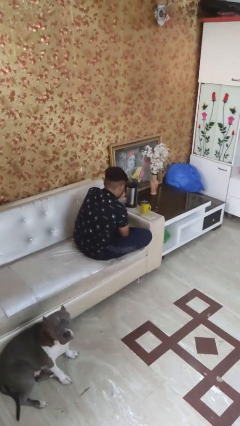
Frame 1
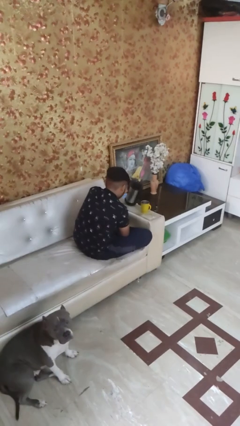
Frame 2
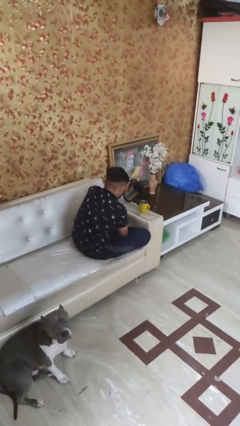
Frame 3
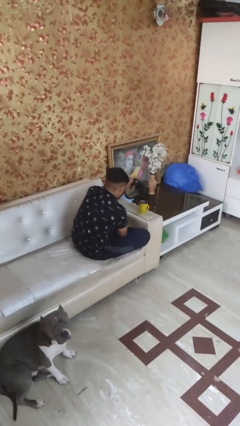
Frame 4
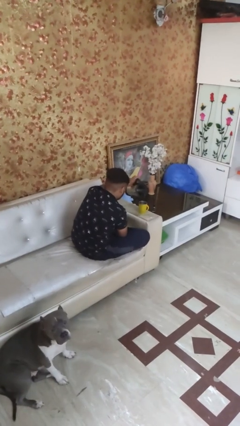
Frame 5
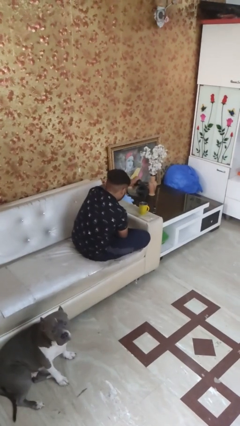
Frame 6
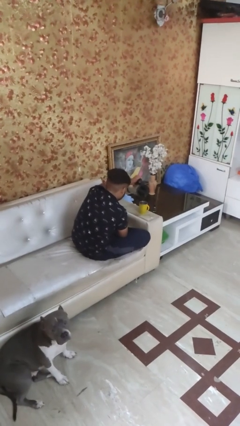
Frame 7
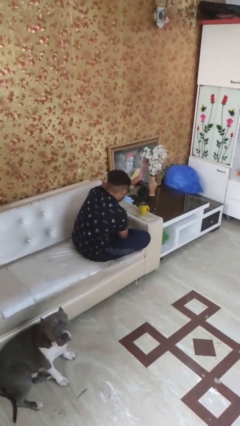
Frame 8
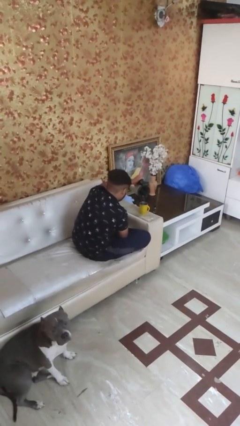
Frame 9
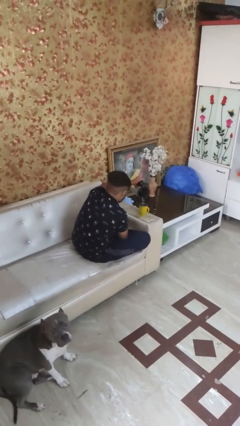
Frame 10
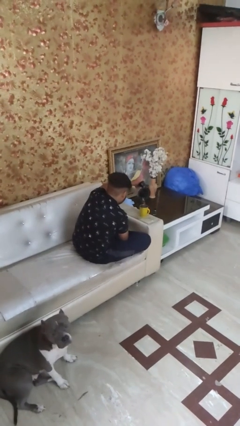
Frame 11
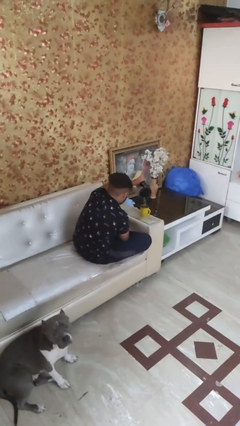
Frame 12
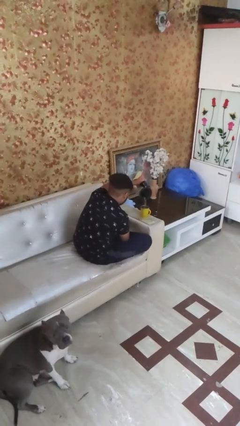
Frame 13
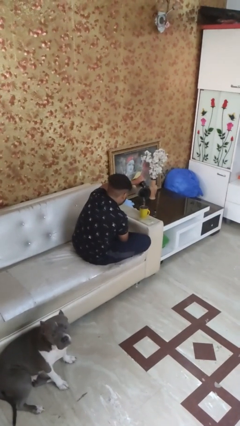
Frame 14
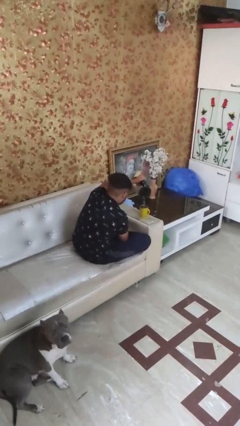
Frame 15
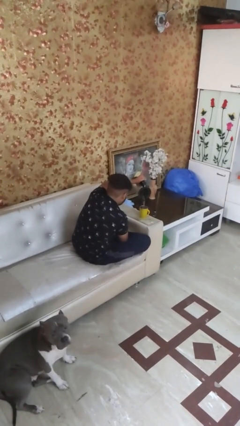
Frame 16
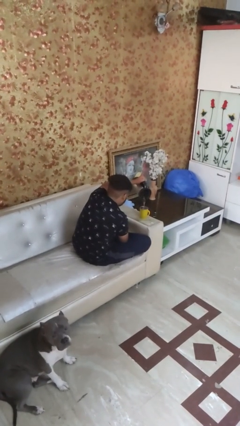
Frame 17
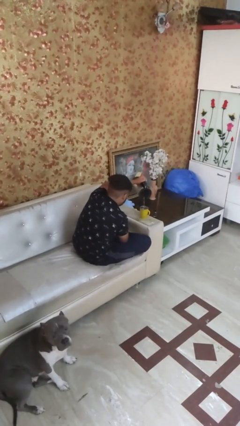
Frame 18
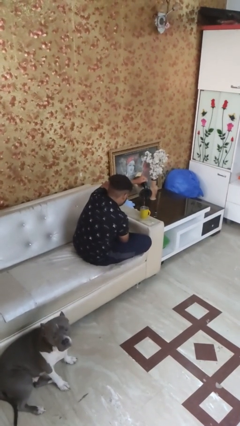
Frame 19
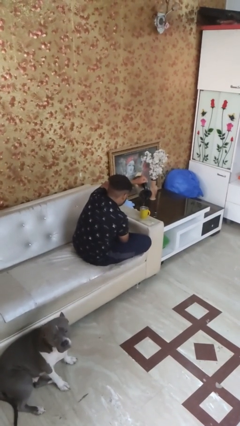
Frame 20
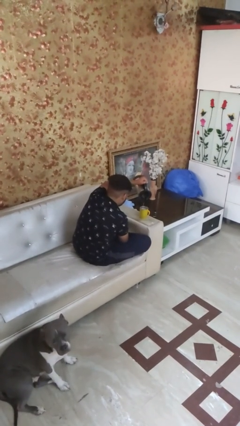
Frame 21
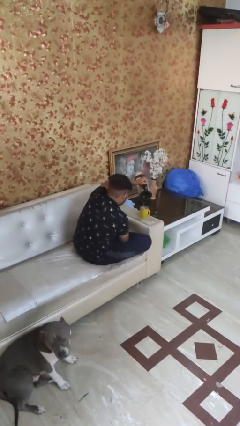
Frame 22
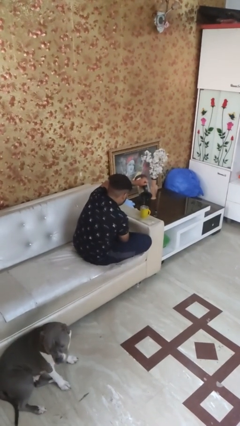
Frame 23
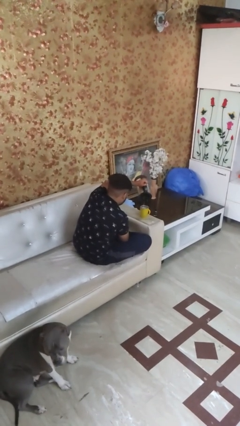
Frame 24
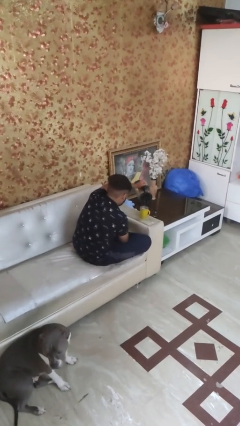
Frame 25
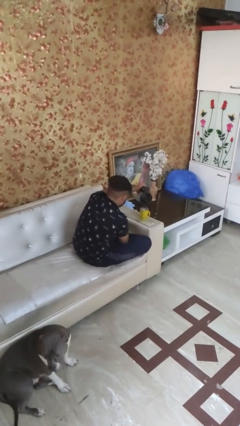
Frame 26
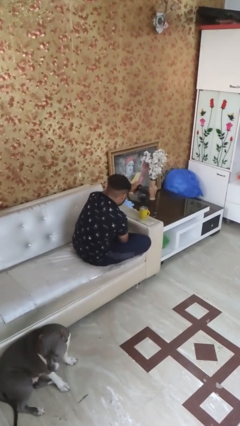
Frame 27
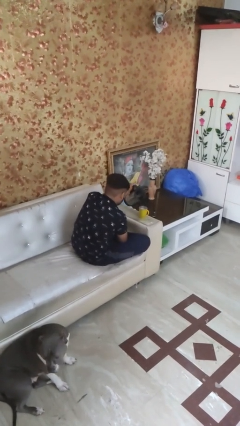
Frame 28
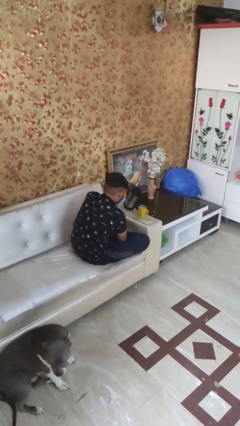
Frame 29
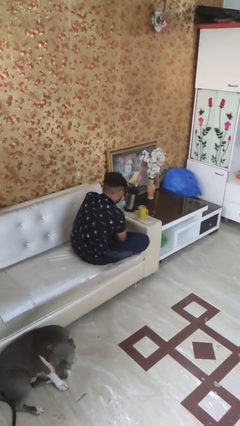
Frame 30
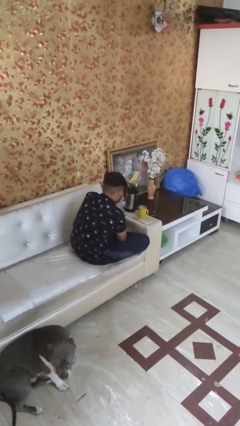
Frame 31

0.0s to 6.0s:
person pours coffee into mug

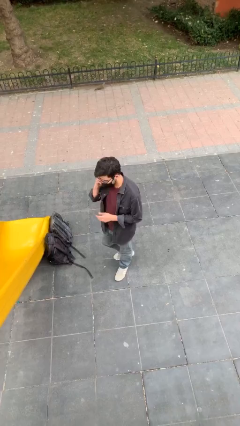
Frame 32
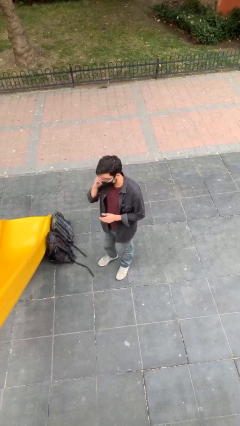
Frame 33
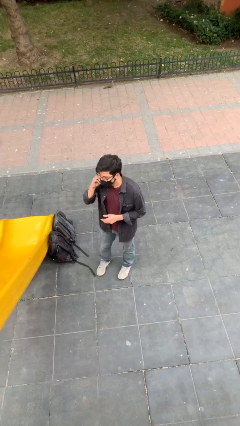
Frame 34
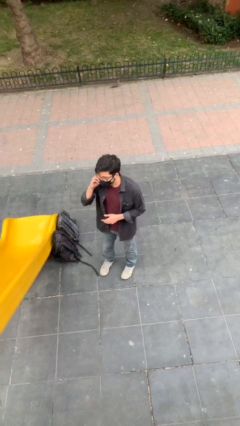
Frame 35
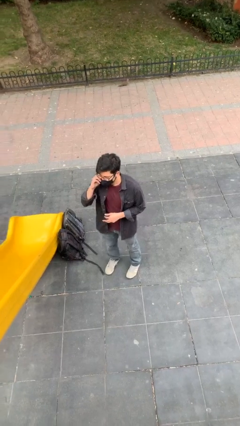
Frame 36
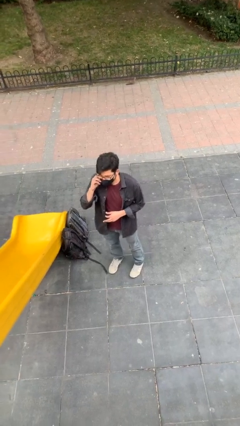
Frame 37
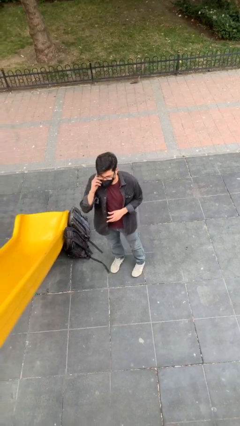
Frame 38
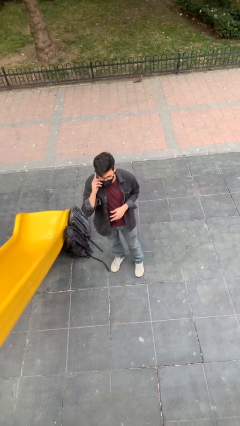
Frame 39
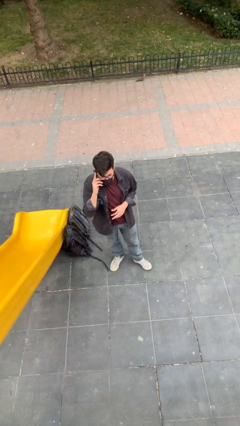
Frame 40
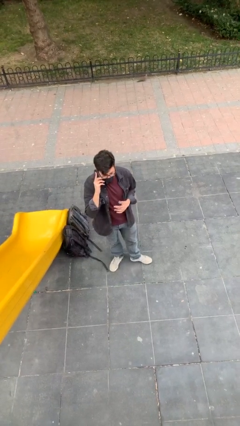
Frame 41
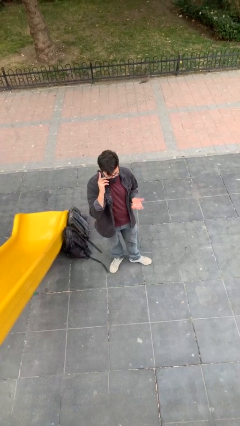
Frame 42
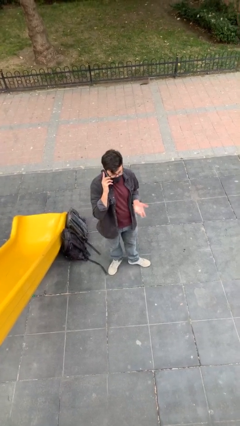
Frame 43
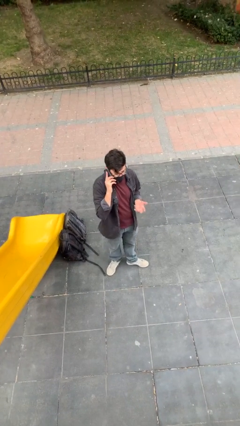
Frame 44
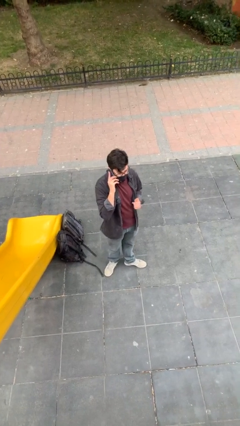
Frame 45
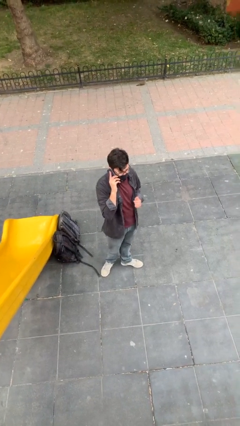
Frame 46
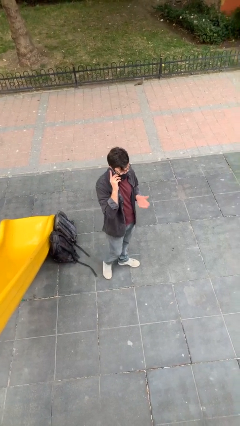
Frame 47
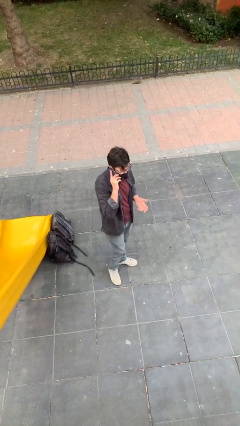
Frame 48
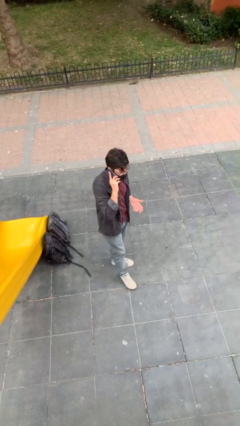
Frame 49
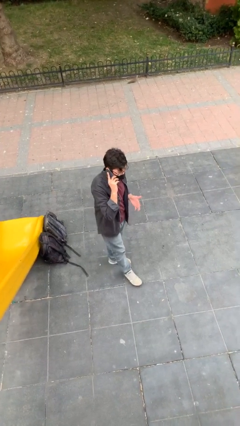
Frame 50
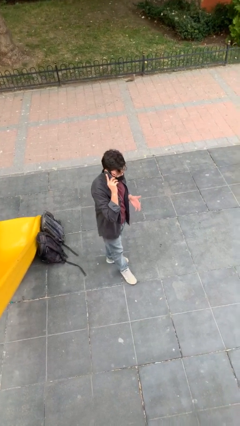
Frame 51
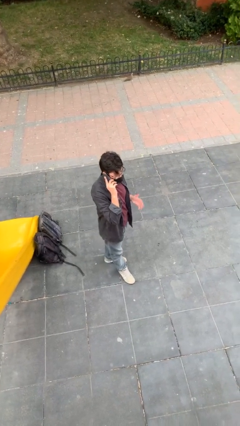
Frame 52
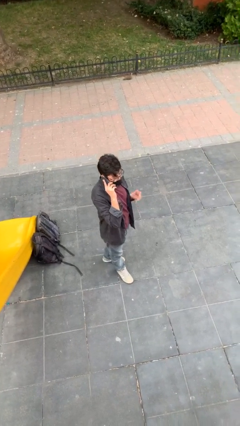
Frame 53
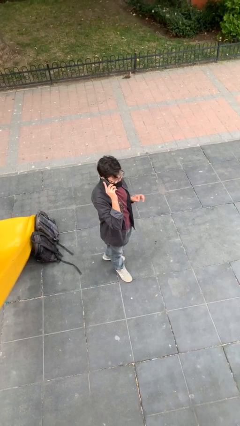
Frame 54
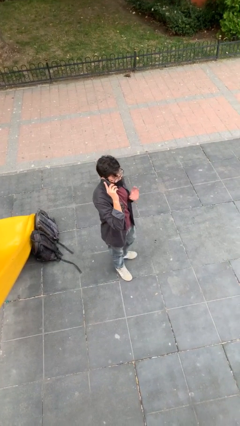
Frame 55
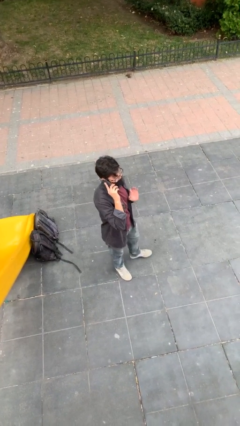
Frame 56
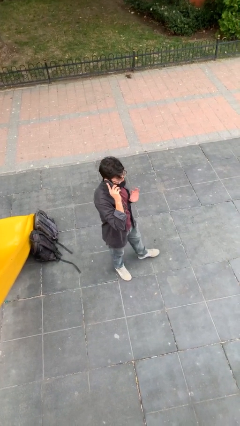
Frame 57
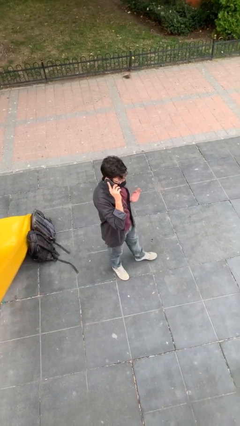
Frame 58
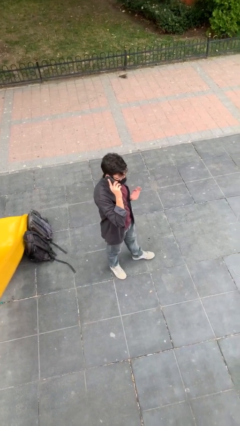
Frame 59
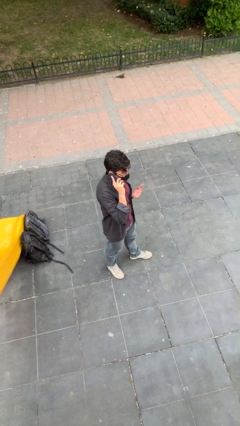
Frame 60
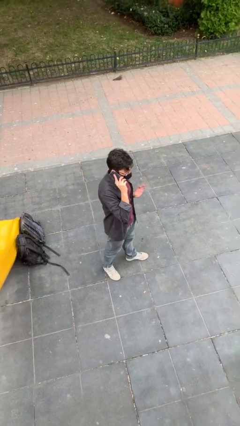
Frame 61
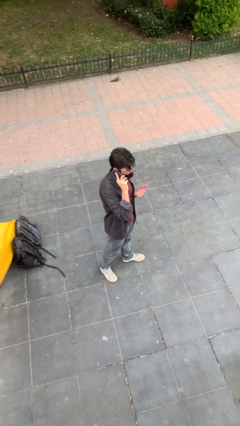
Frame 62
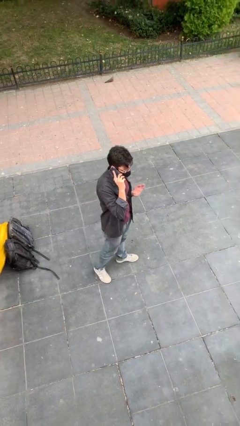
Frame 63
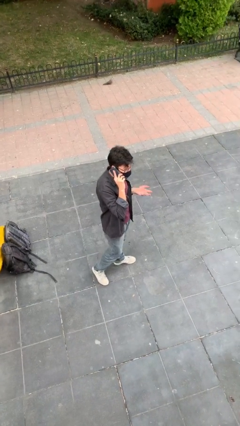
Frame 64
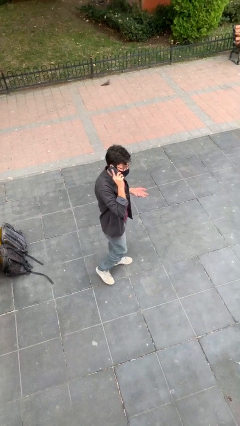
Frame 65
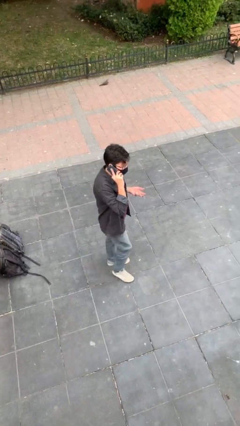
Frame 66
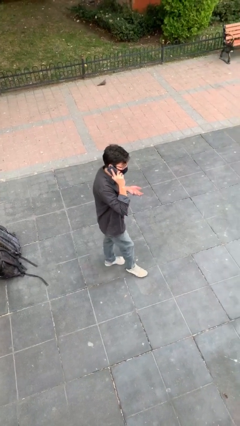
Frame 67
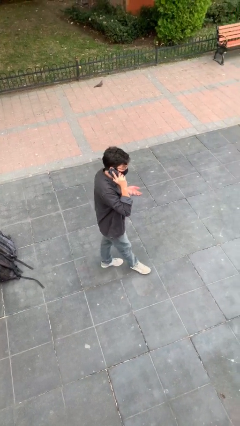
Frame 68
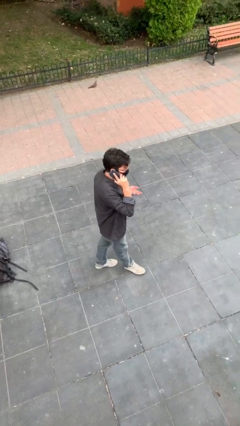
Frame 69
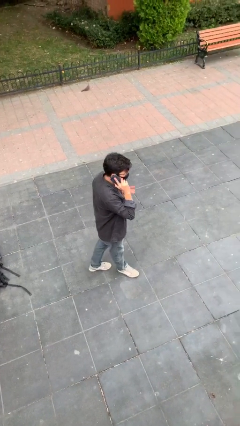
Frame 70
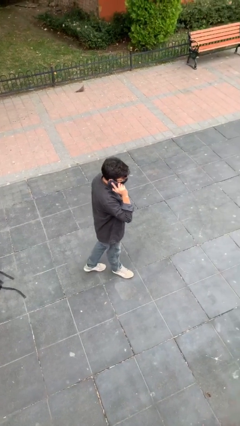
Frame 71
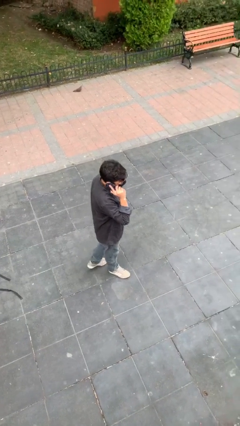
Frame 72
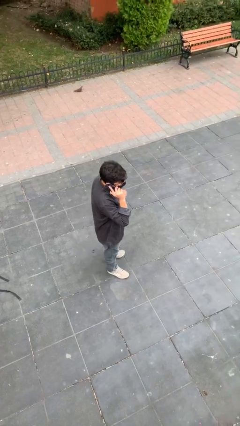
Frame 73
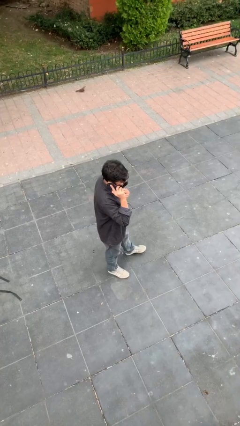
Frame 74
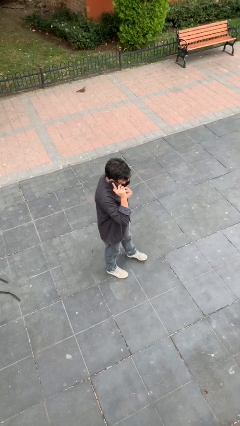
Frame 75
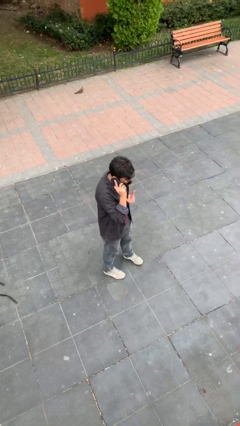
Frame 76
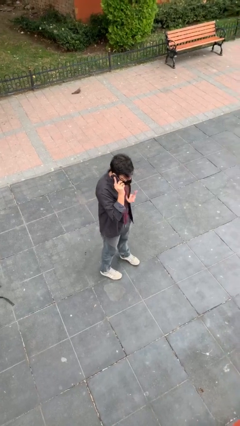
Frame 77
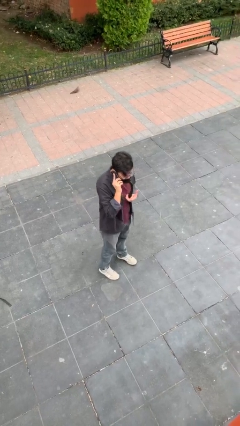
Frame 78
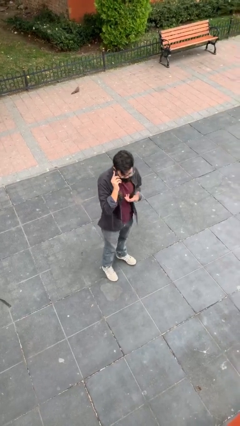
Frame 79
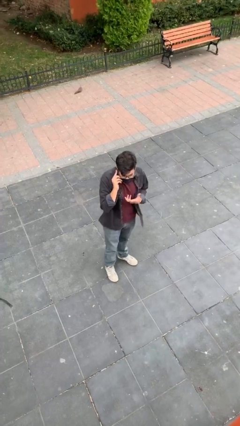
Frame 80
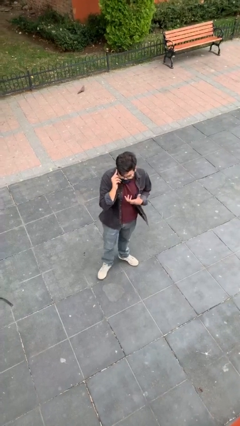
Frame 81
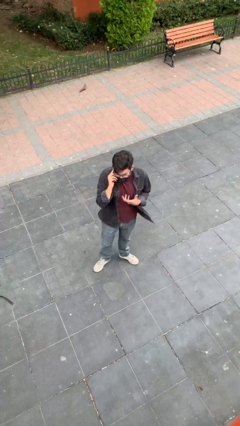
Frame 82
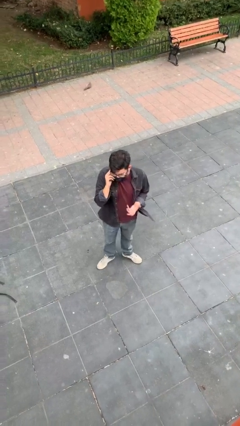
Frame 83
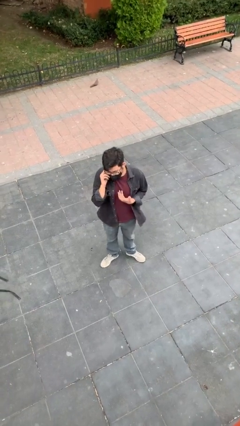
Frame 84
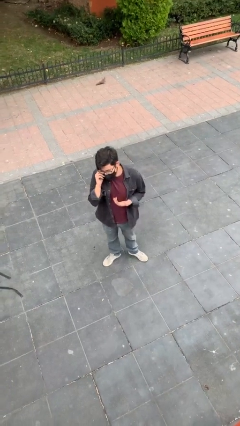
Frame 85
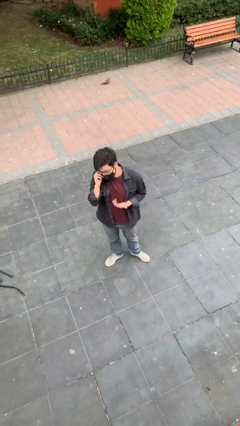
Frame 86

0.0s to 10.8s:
person talks on phone

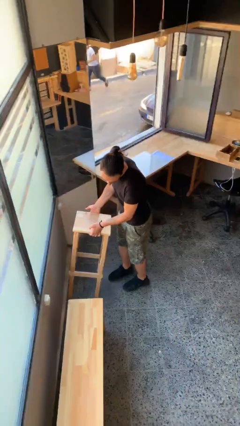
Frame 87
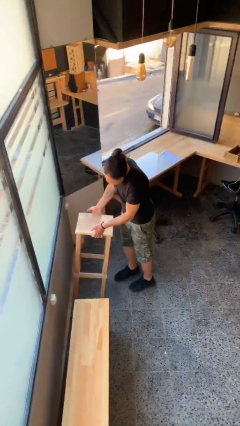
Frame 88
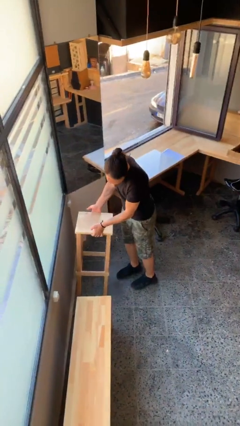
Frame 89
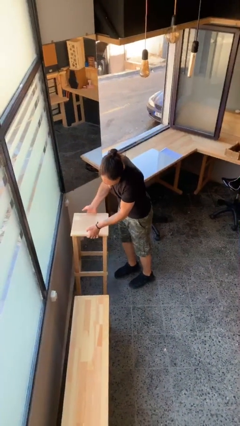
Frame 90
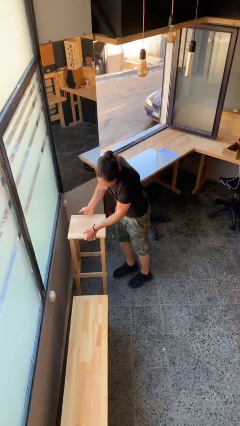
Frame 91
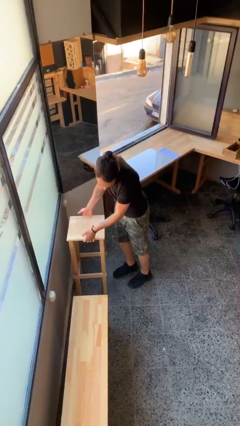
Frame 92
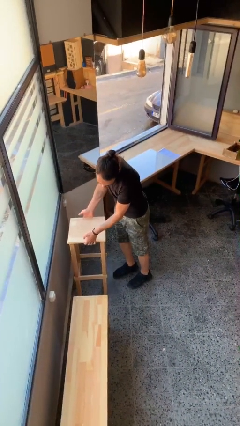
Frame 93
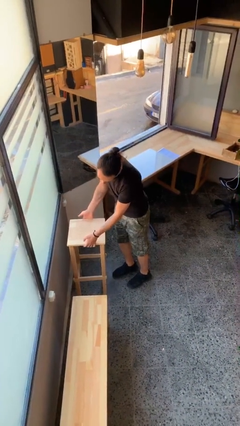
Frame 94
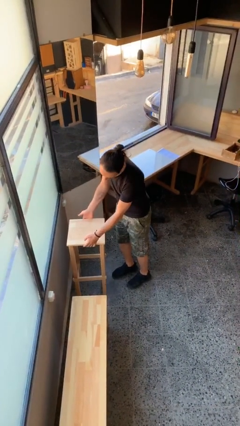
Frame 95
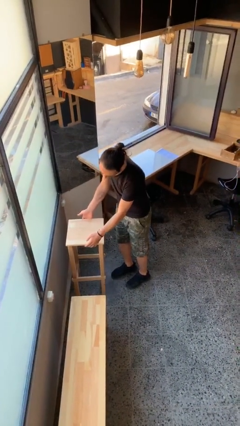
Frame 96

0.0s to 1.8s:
person puts down object on floor
